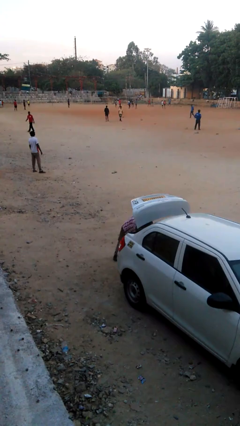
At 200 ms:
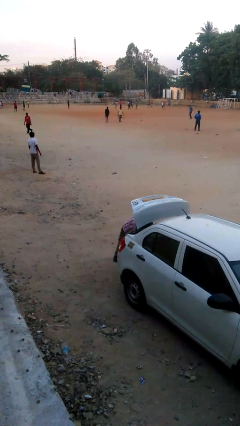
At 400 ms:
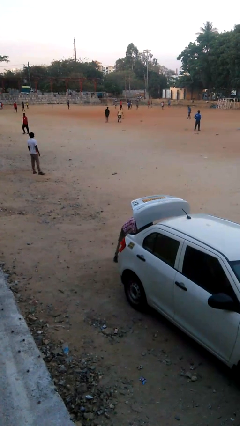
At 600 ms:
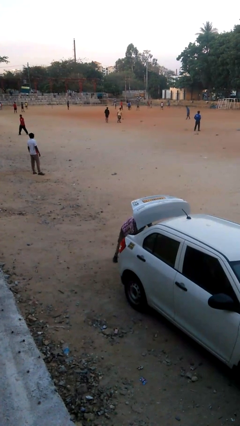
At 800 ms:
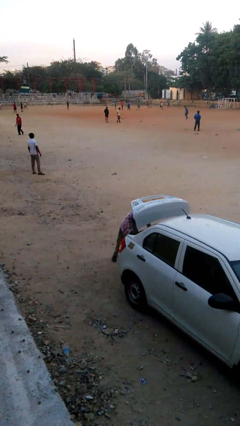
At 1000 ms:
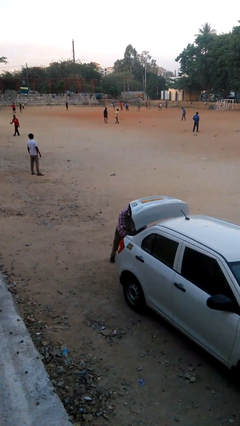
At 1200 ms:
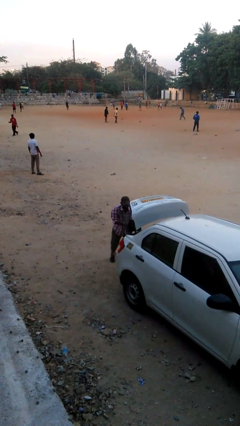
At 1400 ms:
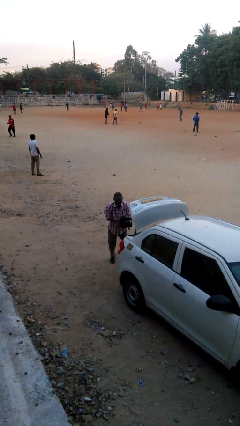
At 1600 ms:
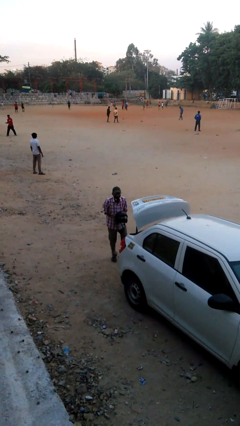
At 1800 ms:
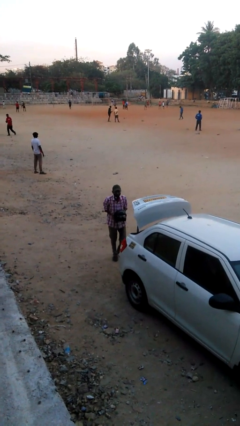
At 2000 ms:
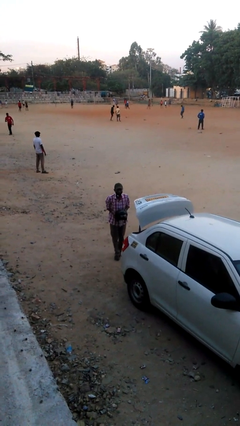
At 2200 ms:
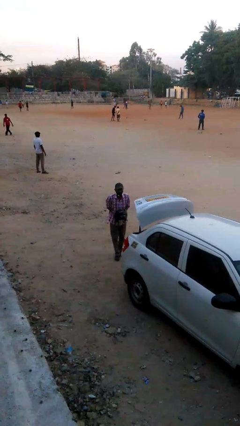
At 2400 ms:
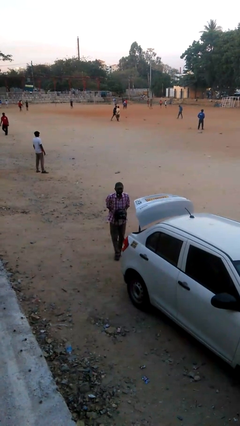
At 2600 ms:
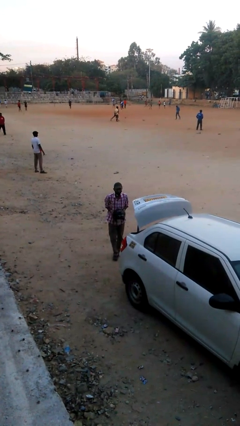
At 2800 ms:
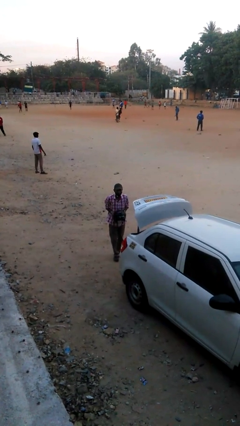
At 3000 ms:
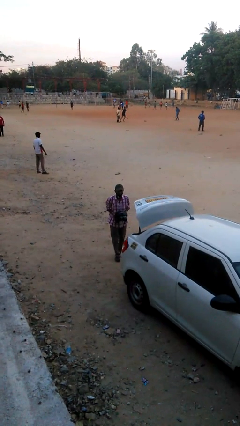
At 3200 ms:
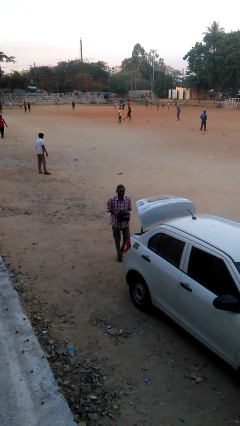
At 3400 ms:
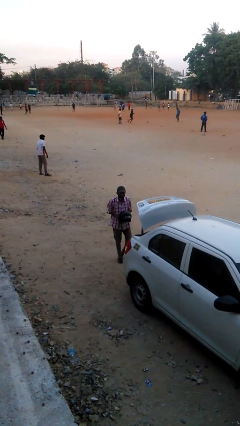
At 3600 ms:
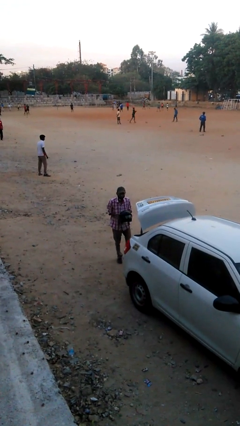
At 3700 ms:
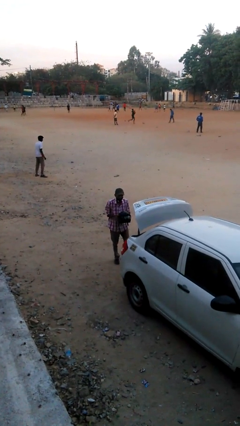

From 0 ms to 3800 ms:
person unloads car

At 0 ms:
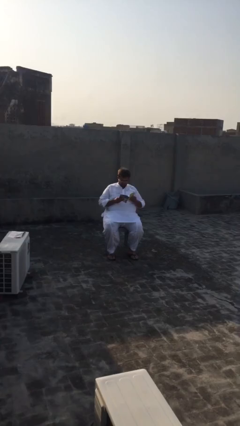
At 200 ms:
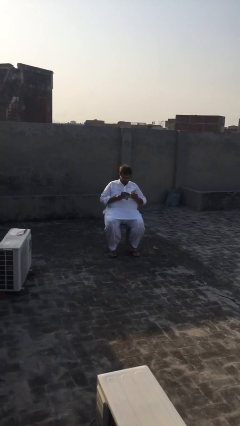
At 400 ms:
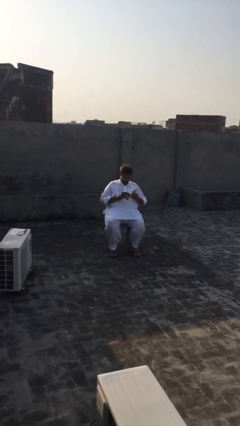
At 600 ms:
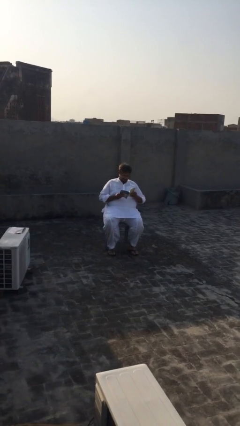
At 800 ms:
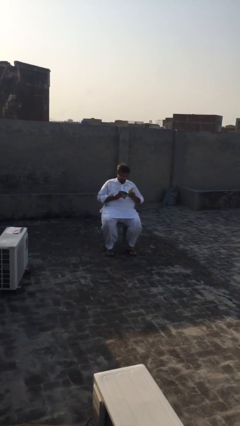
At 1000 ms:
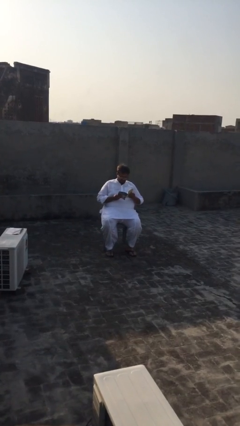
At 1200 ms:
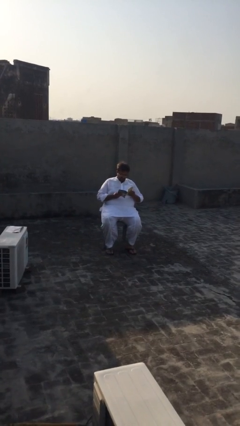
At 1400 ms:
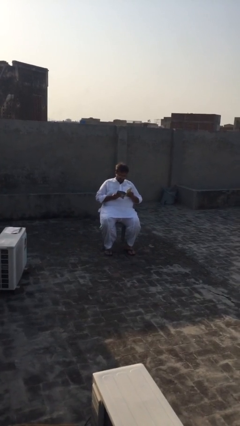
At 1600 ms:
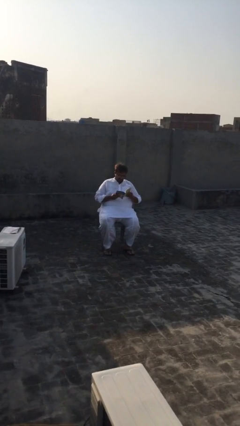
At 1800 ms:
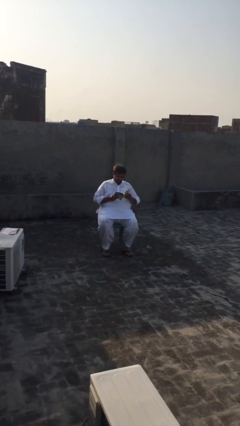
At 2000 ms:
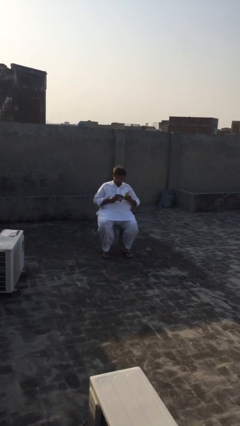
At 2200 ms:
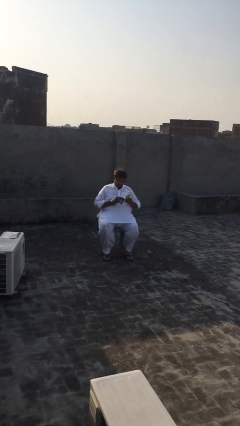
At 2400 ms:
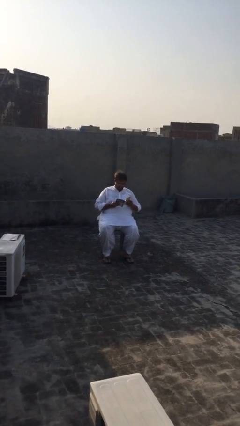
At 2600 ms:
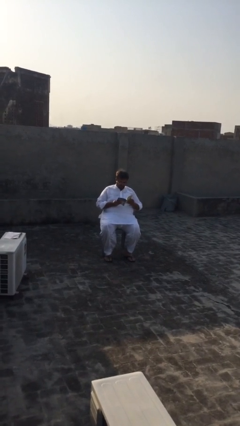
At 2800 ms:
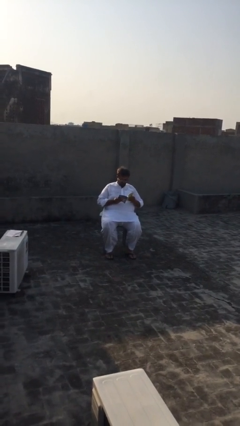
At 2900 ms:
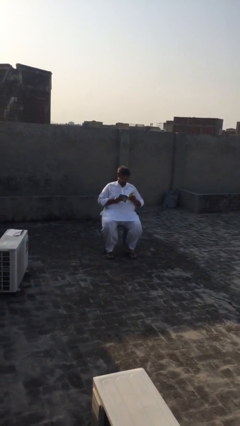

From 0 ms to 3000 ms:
person reads document

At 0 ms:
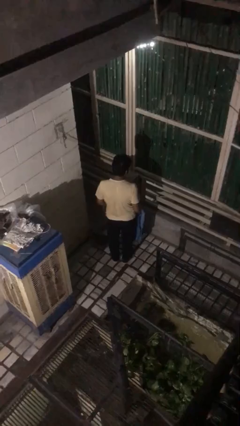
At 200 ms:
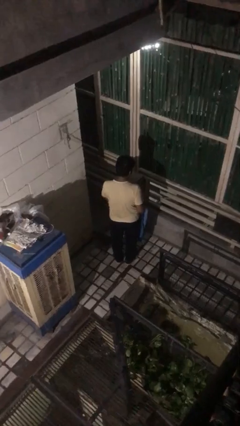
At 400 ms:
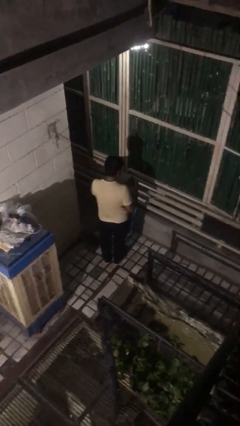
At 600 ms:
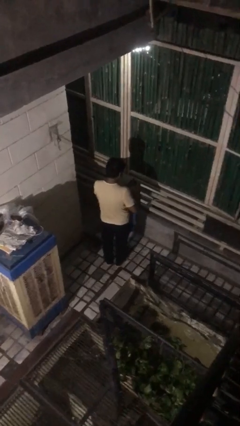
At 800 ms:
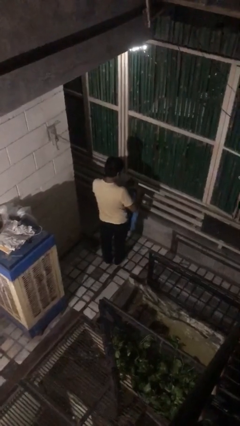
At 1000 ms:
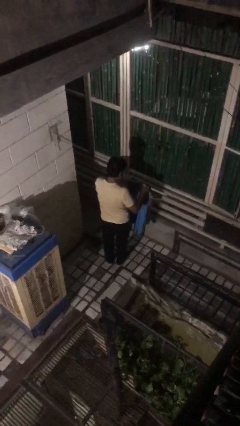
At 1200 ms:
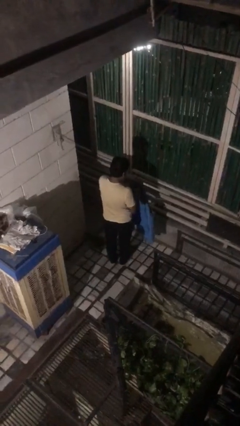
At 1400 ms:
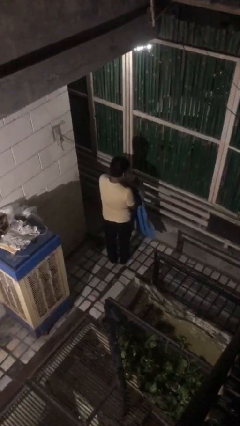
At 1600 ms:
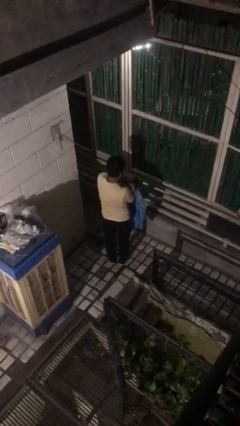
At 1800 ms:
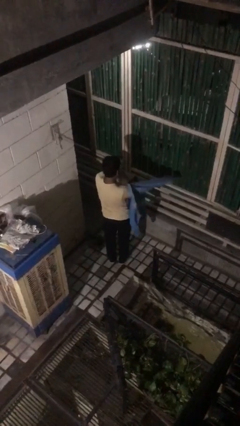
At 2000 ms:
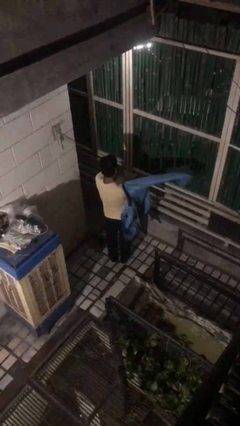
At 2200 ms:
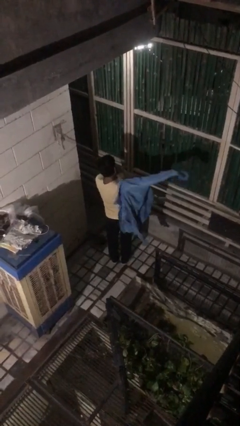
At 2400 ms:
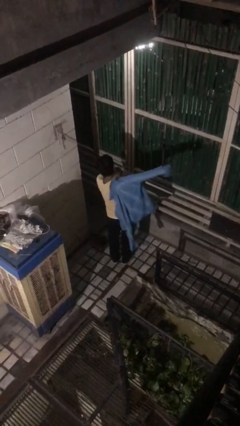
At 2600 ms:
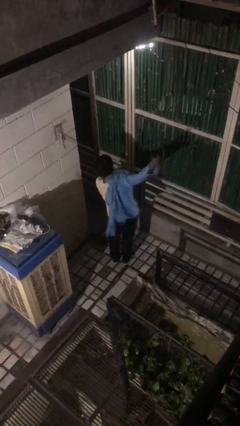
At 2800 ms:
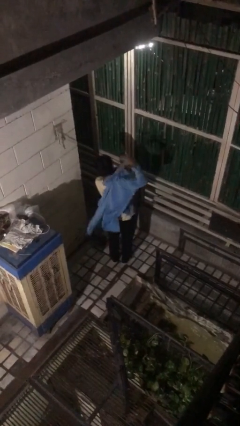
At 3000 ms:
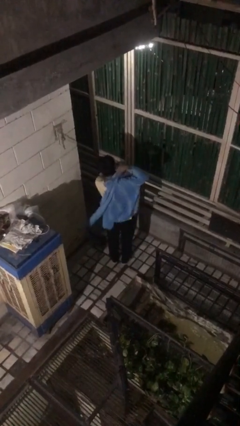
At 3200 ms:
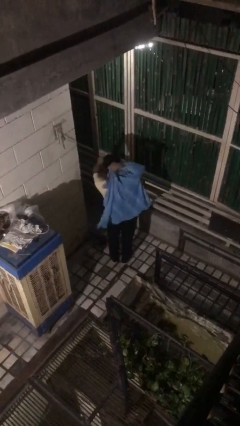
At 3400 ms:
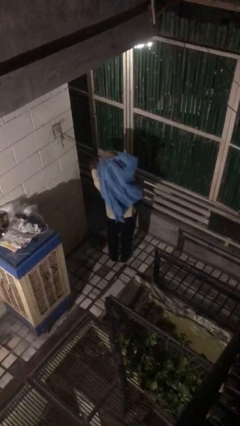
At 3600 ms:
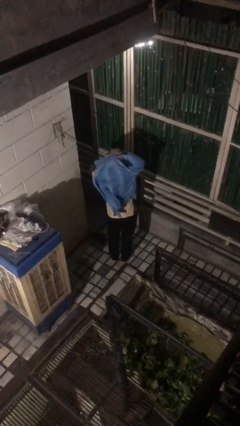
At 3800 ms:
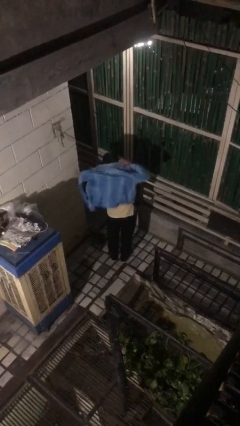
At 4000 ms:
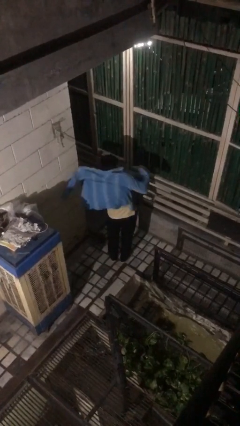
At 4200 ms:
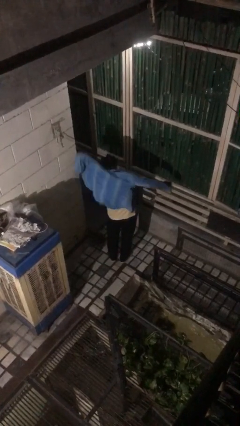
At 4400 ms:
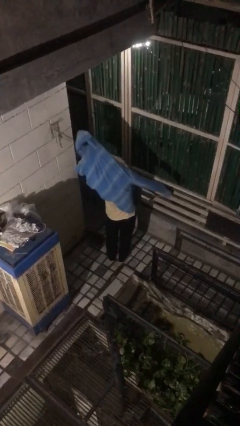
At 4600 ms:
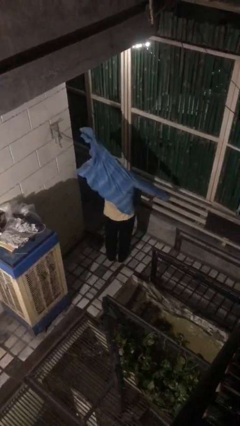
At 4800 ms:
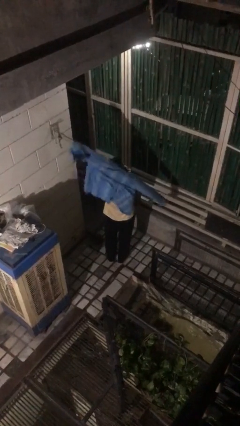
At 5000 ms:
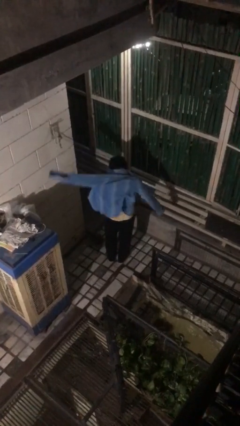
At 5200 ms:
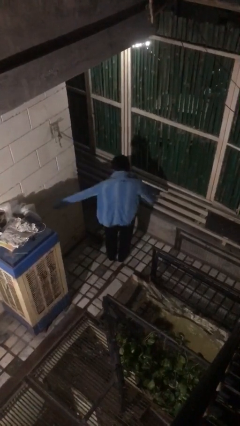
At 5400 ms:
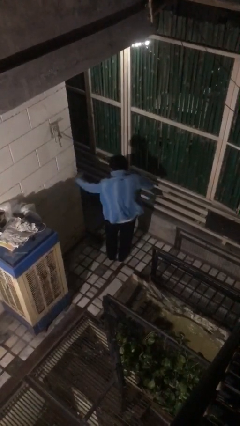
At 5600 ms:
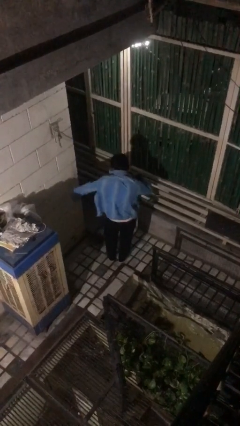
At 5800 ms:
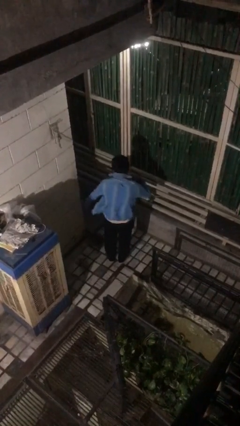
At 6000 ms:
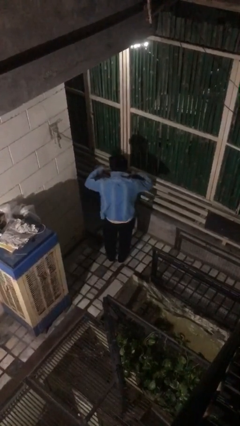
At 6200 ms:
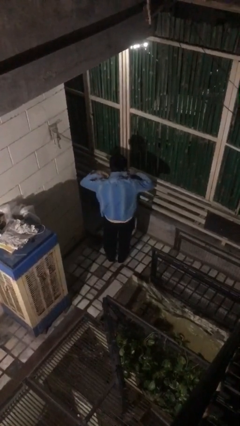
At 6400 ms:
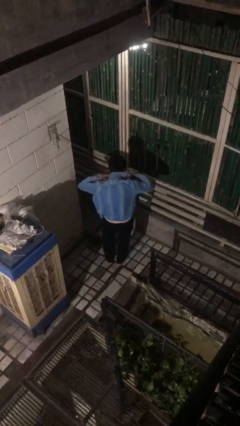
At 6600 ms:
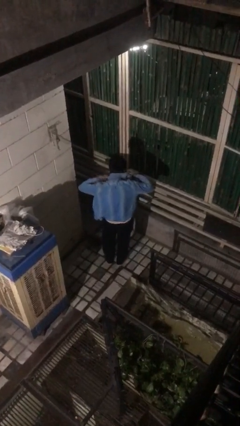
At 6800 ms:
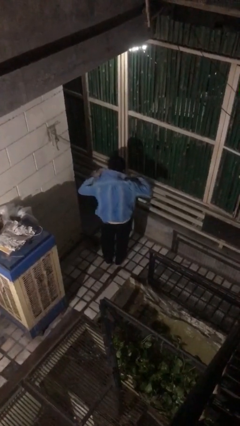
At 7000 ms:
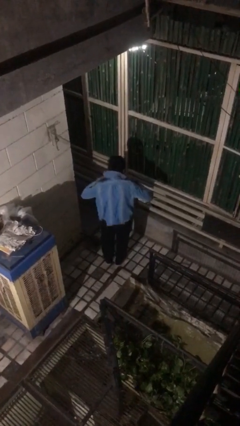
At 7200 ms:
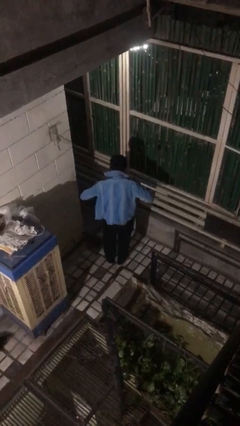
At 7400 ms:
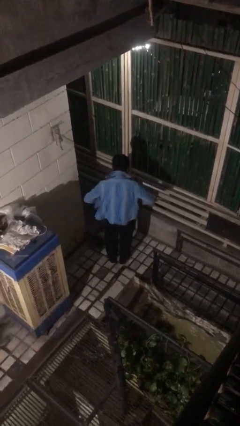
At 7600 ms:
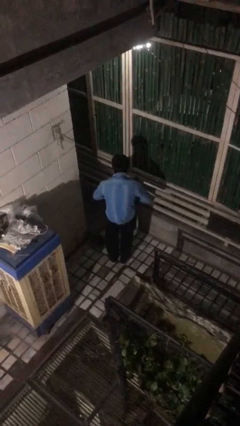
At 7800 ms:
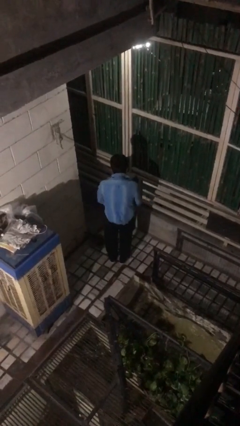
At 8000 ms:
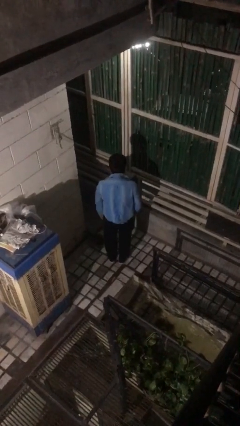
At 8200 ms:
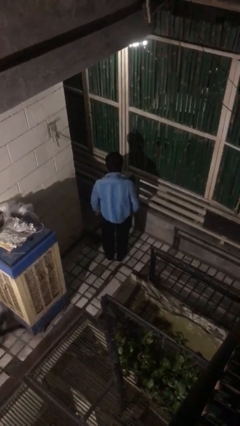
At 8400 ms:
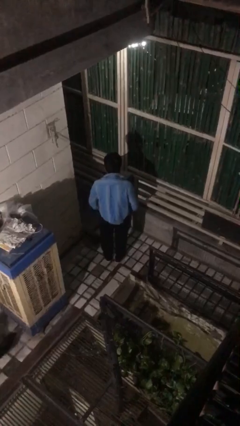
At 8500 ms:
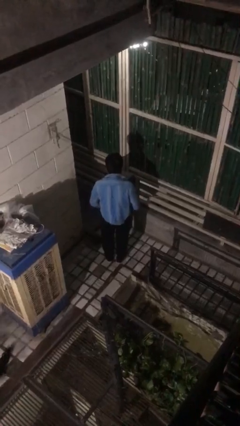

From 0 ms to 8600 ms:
person puts on shirt

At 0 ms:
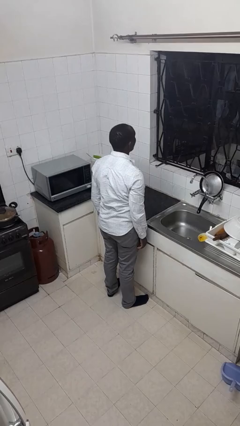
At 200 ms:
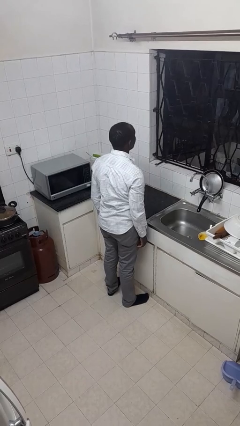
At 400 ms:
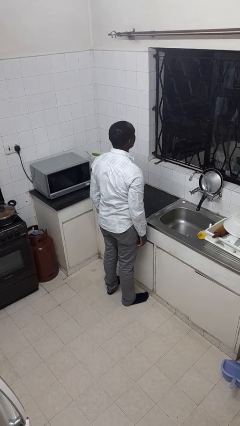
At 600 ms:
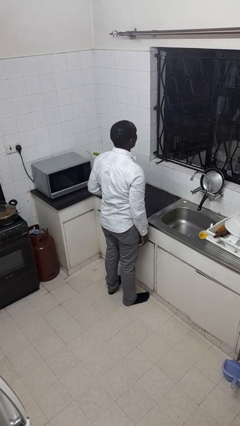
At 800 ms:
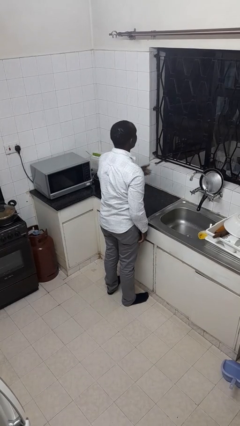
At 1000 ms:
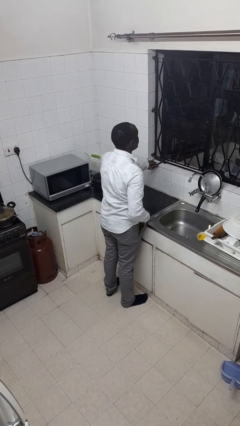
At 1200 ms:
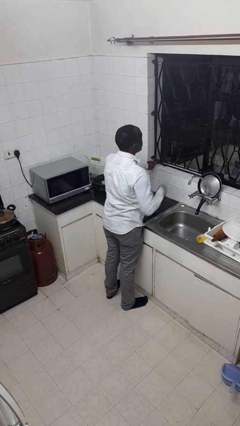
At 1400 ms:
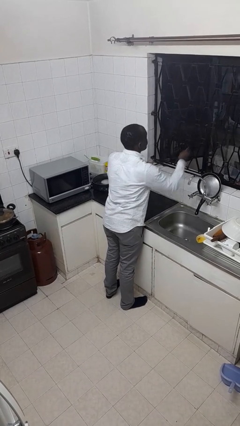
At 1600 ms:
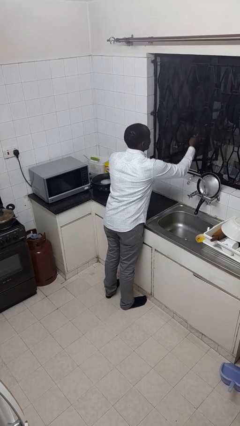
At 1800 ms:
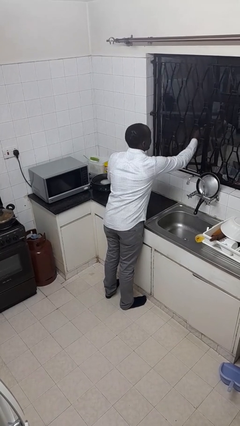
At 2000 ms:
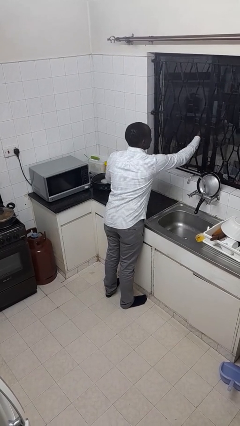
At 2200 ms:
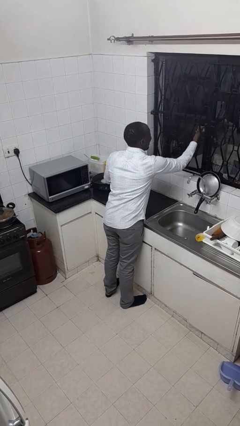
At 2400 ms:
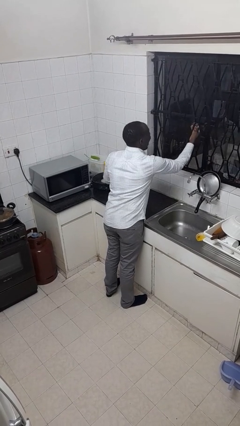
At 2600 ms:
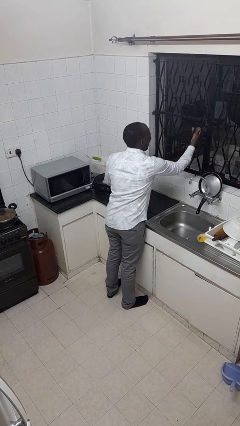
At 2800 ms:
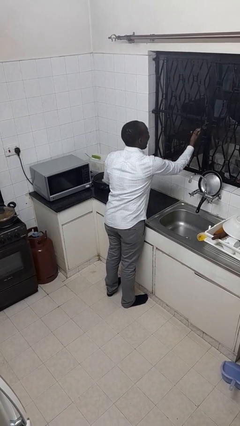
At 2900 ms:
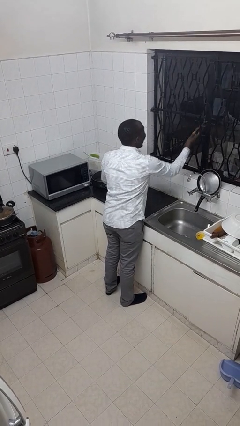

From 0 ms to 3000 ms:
person closes home window
